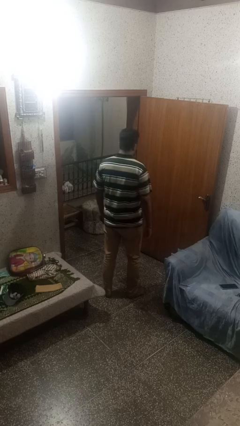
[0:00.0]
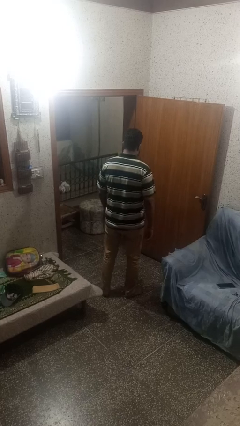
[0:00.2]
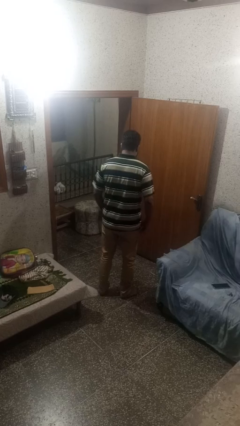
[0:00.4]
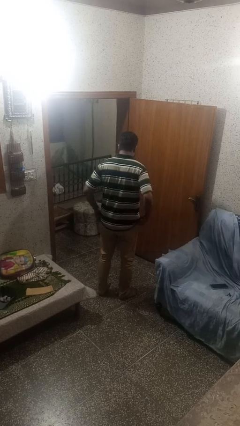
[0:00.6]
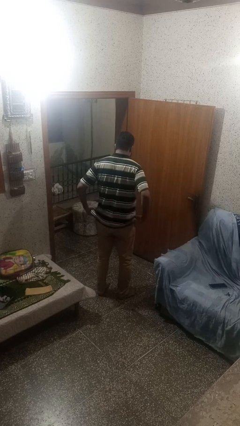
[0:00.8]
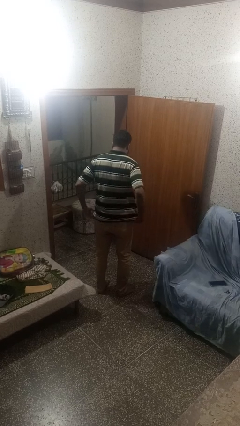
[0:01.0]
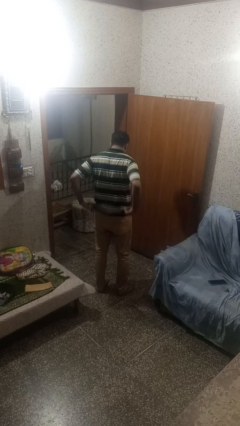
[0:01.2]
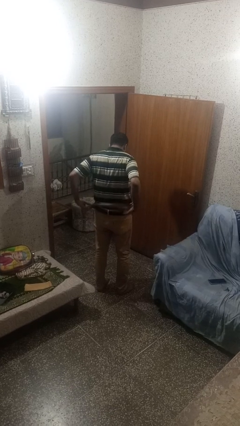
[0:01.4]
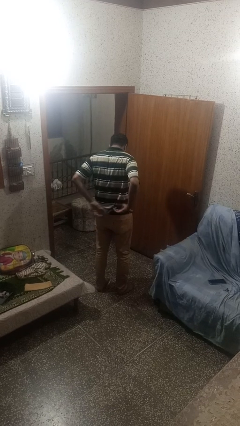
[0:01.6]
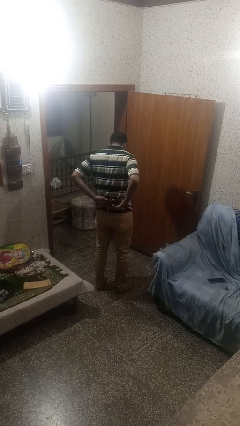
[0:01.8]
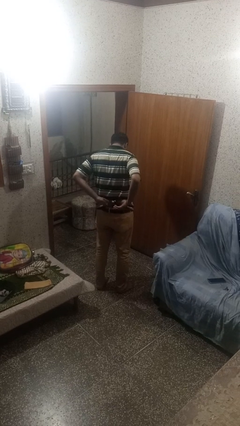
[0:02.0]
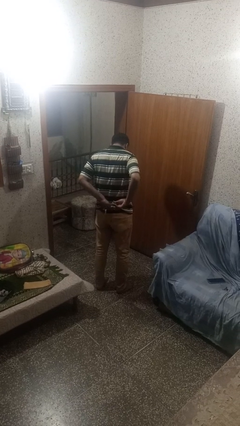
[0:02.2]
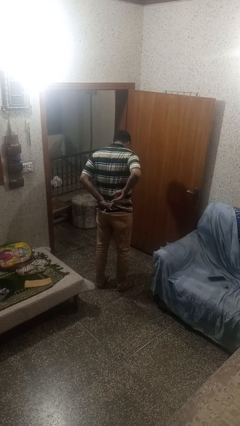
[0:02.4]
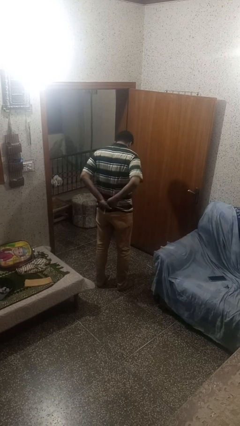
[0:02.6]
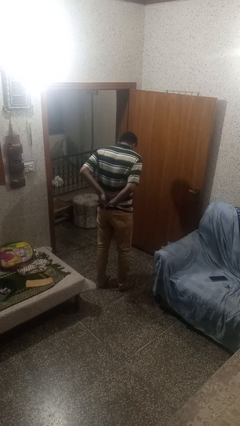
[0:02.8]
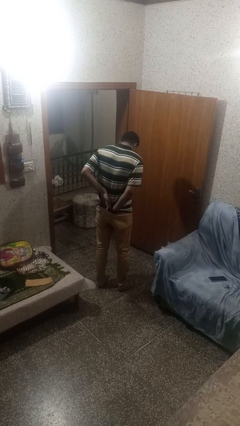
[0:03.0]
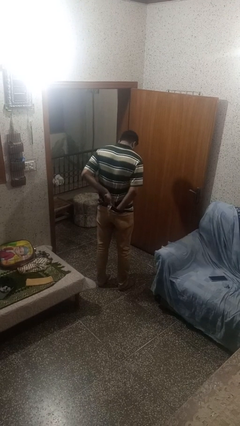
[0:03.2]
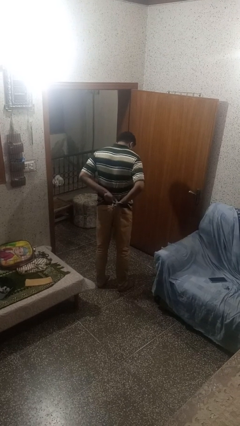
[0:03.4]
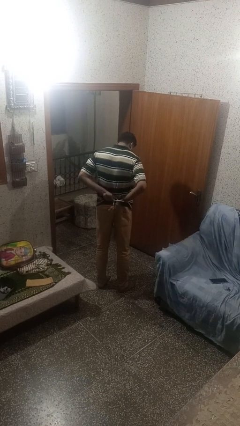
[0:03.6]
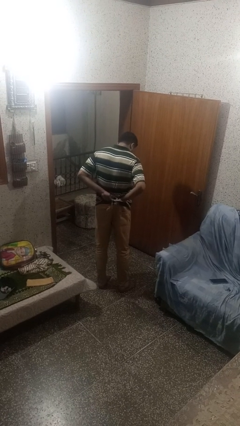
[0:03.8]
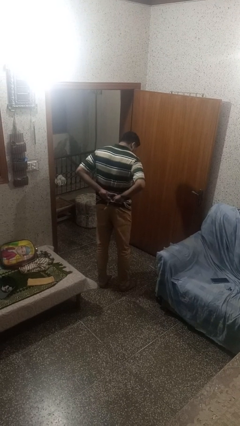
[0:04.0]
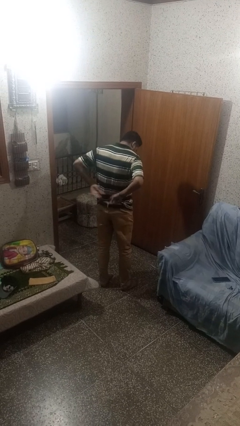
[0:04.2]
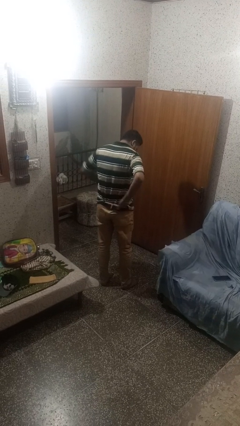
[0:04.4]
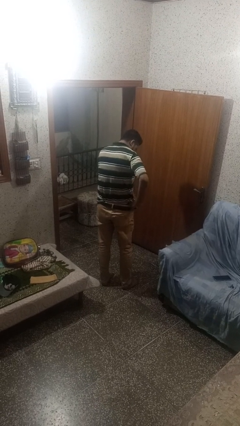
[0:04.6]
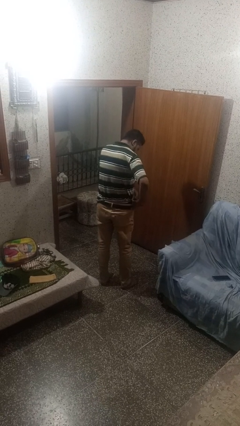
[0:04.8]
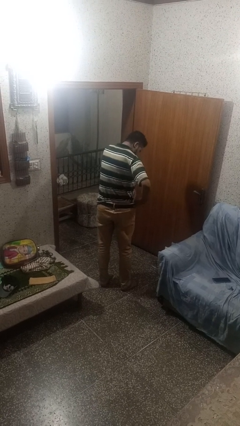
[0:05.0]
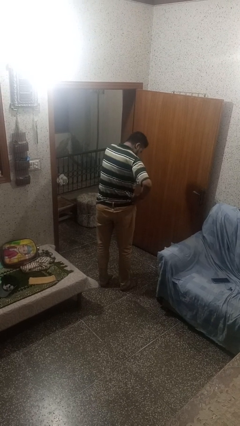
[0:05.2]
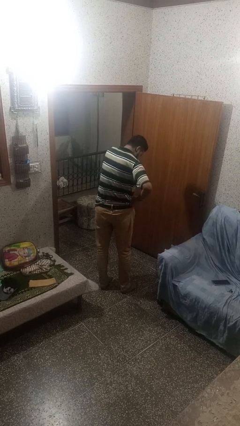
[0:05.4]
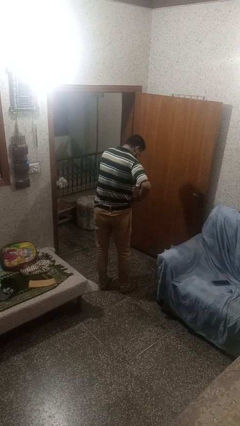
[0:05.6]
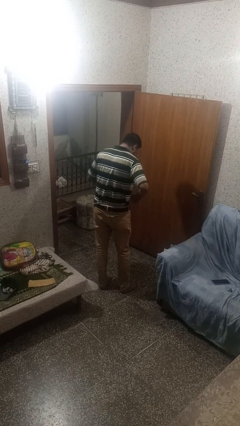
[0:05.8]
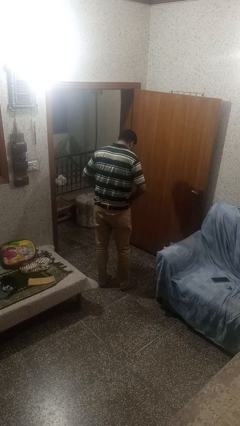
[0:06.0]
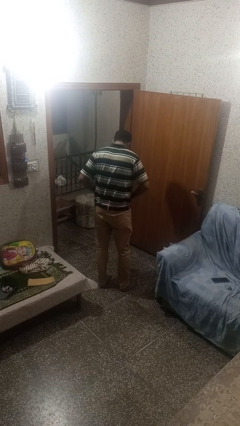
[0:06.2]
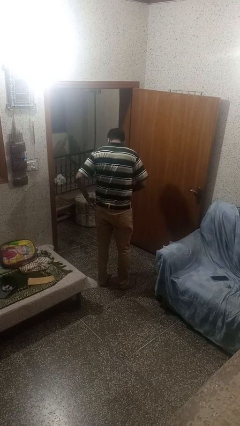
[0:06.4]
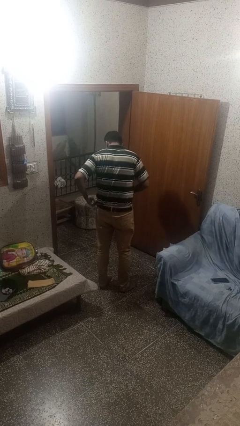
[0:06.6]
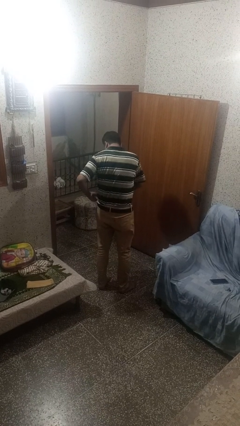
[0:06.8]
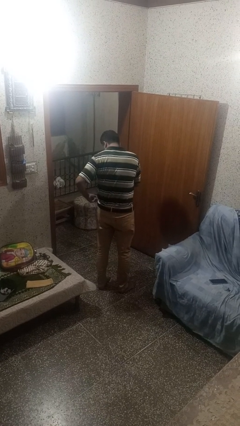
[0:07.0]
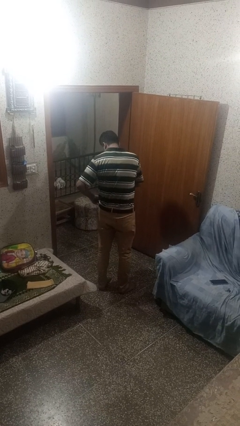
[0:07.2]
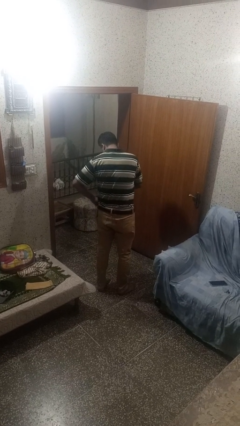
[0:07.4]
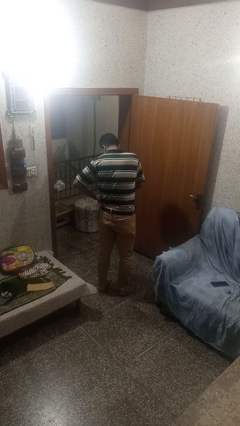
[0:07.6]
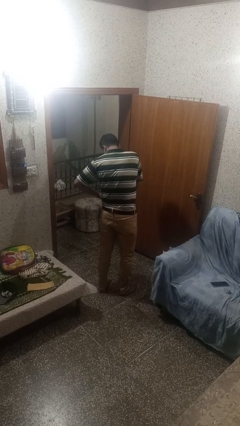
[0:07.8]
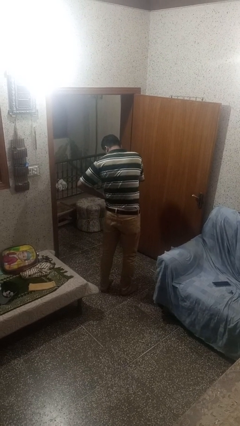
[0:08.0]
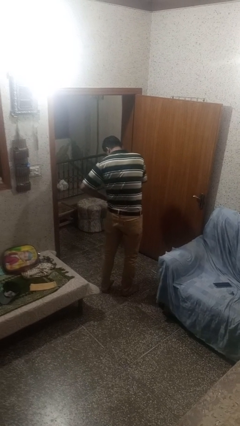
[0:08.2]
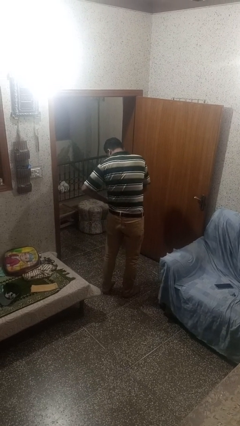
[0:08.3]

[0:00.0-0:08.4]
person tucks in shirt

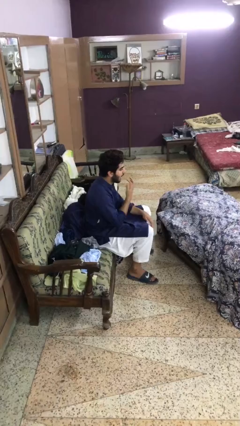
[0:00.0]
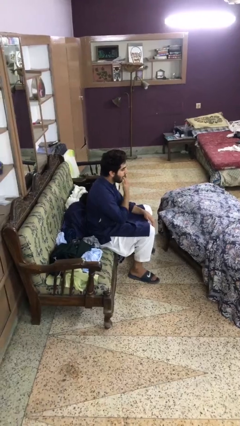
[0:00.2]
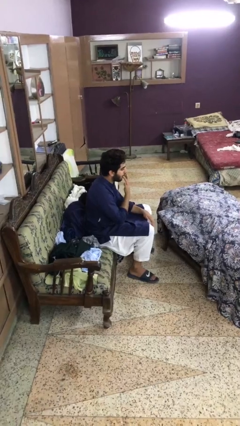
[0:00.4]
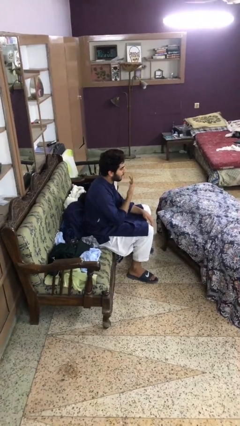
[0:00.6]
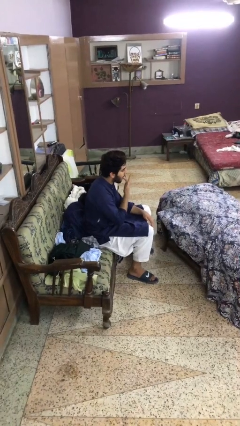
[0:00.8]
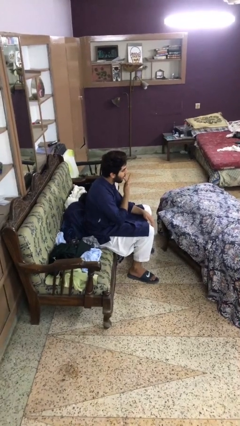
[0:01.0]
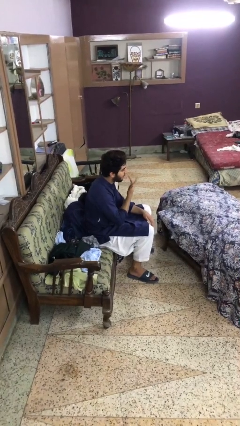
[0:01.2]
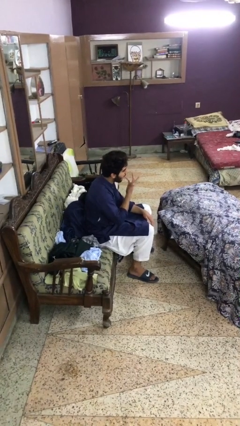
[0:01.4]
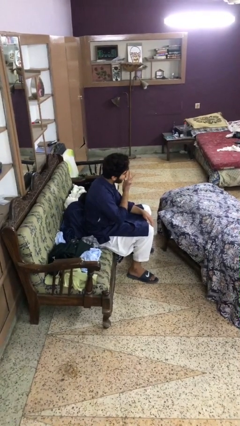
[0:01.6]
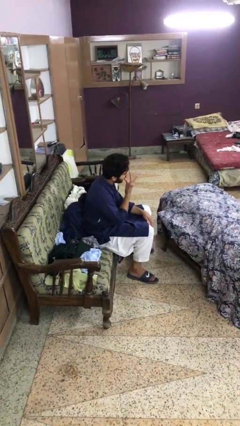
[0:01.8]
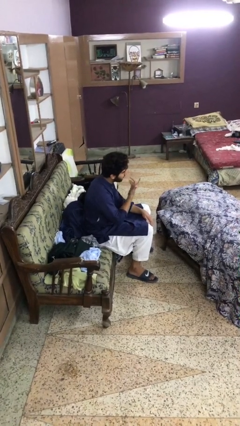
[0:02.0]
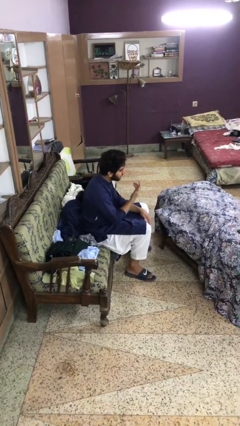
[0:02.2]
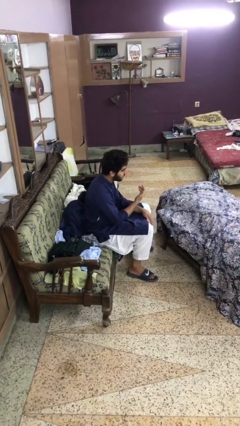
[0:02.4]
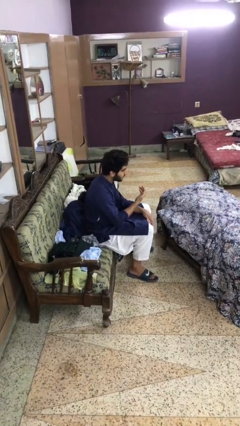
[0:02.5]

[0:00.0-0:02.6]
person licks fingers

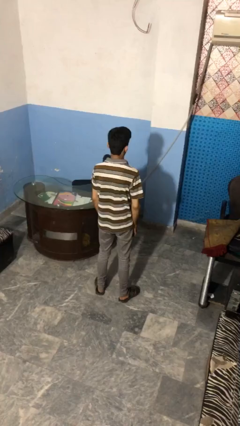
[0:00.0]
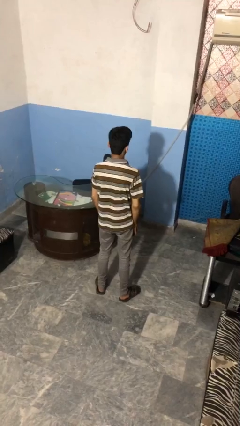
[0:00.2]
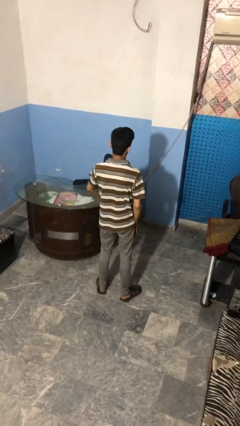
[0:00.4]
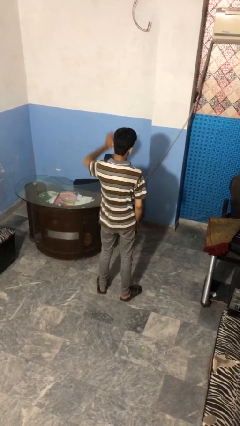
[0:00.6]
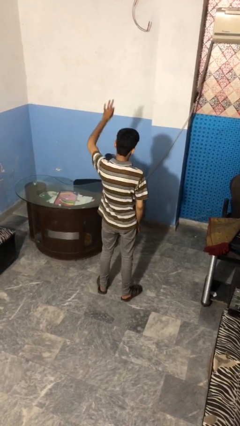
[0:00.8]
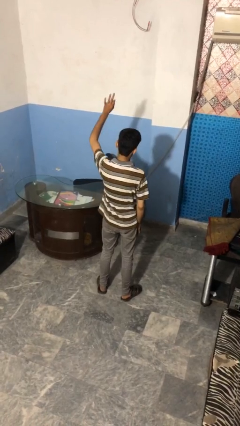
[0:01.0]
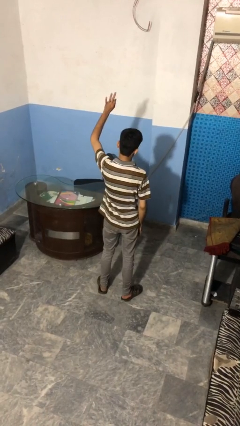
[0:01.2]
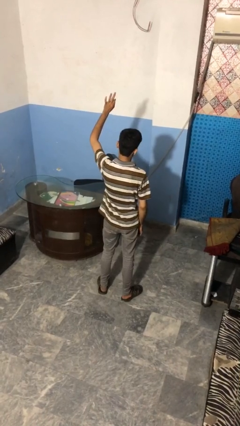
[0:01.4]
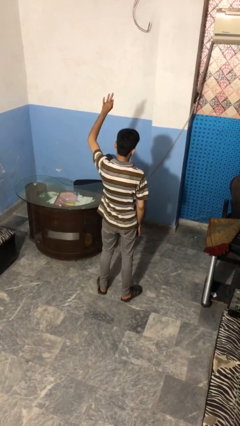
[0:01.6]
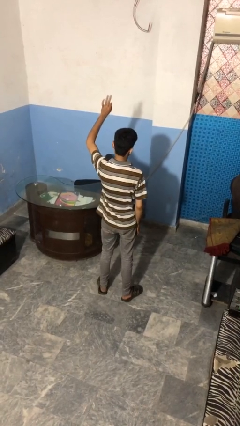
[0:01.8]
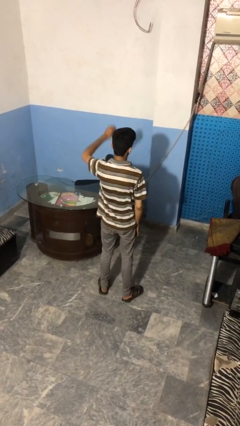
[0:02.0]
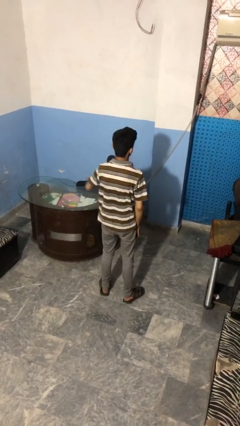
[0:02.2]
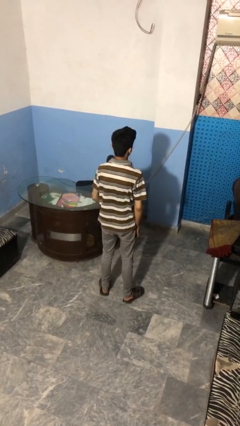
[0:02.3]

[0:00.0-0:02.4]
person gestures number three

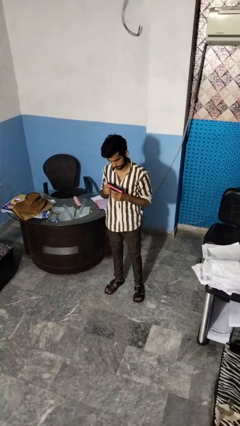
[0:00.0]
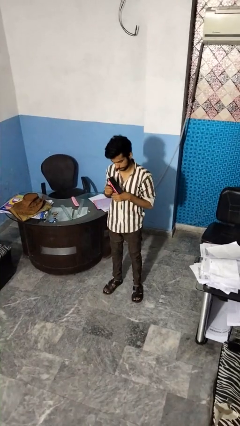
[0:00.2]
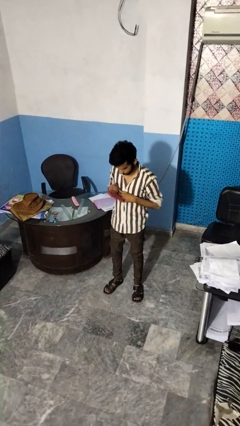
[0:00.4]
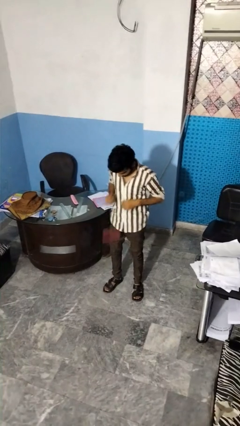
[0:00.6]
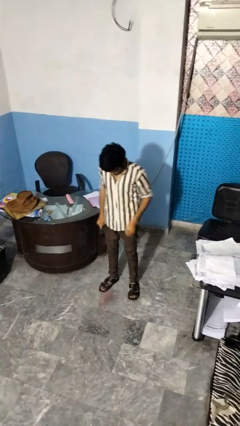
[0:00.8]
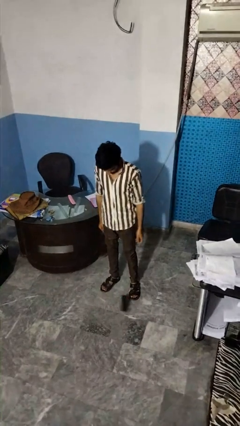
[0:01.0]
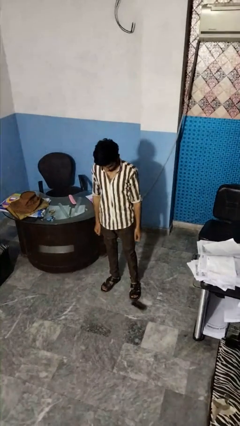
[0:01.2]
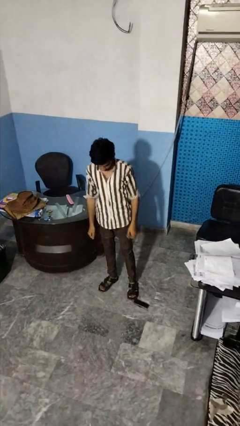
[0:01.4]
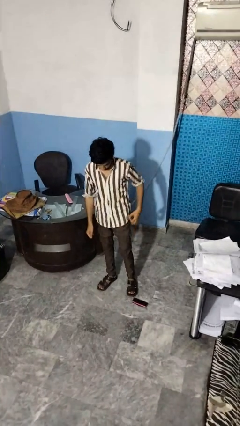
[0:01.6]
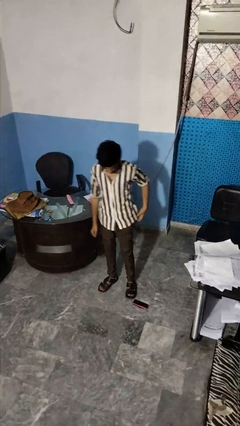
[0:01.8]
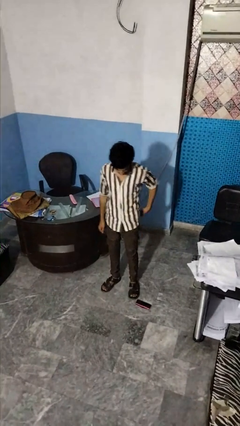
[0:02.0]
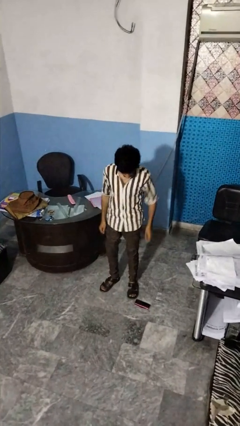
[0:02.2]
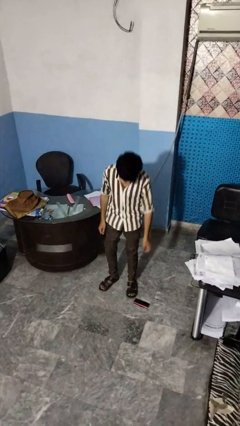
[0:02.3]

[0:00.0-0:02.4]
person drops object

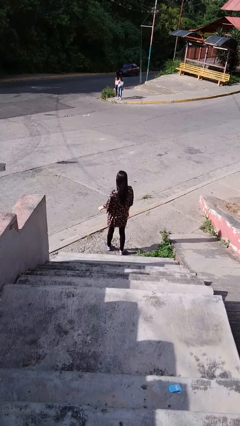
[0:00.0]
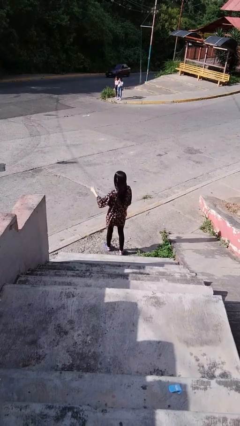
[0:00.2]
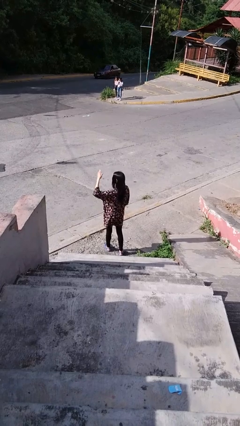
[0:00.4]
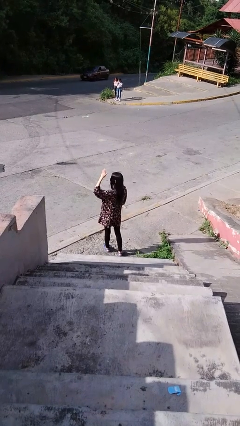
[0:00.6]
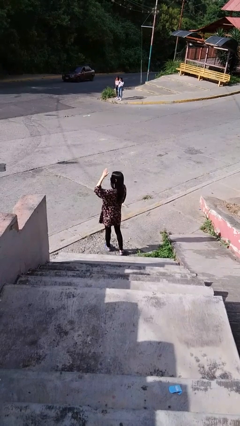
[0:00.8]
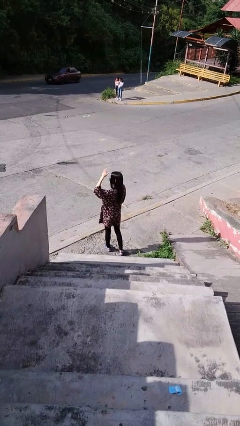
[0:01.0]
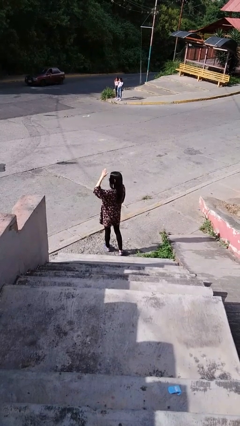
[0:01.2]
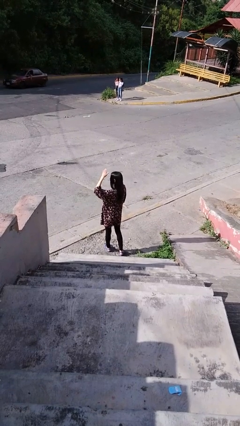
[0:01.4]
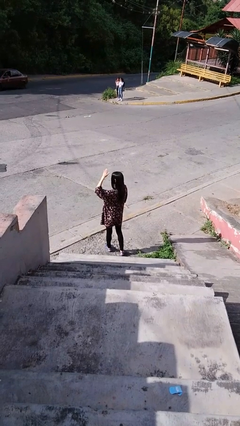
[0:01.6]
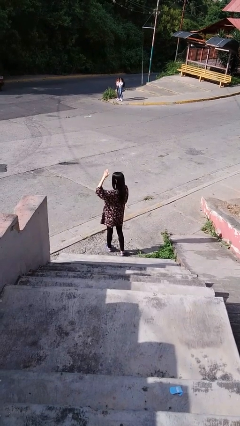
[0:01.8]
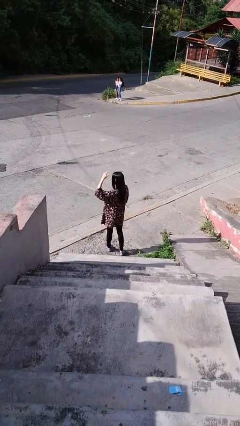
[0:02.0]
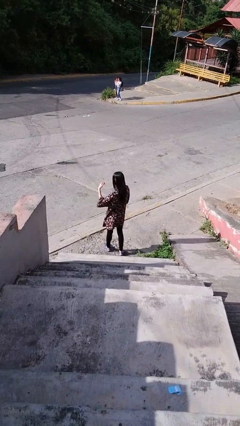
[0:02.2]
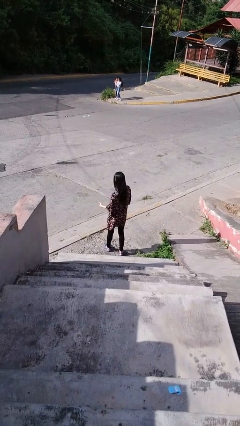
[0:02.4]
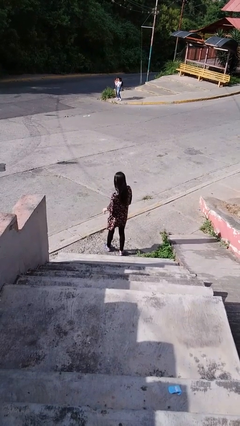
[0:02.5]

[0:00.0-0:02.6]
person shades eyes
